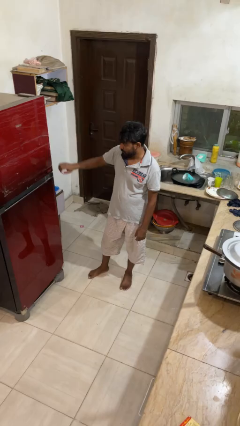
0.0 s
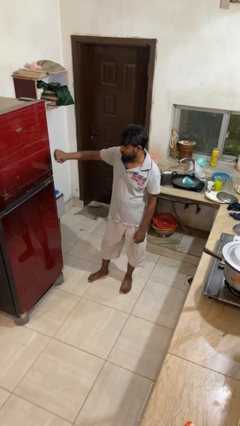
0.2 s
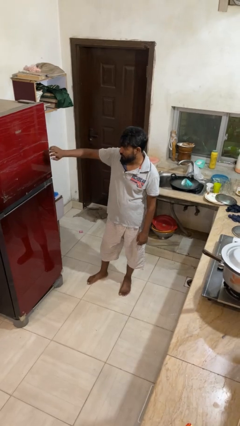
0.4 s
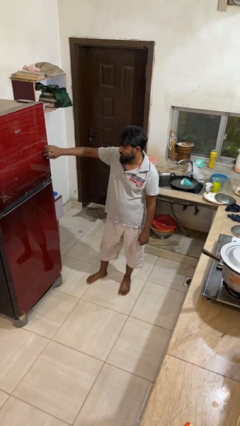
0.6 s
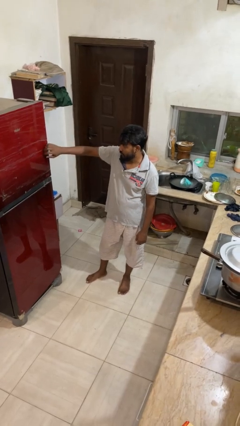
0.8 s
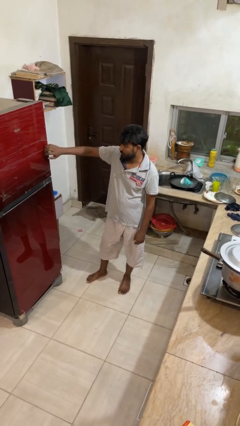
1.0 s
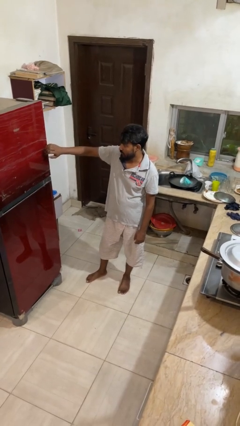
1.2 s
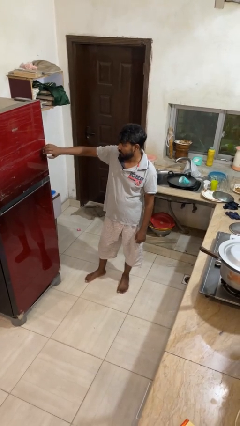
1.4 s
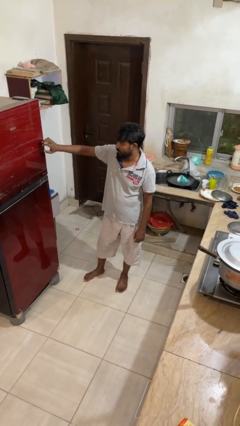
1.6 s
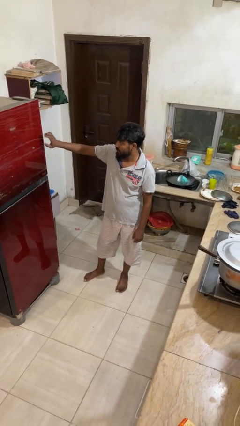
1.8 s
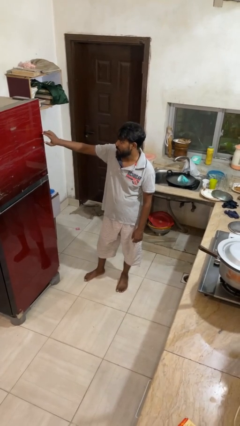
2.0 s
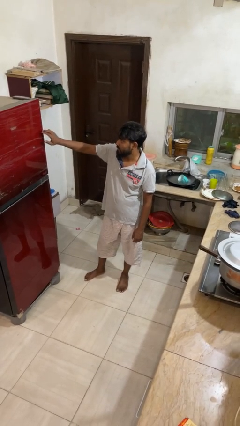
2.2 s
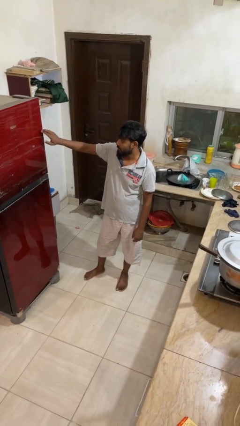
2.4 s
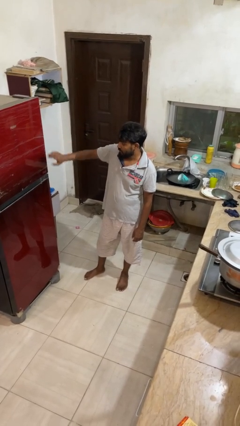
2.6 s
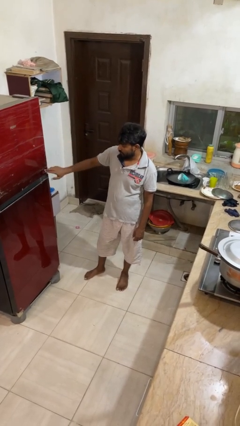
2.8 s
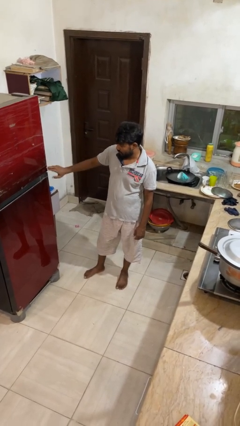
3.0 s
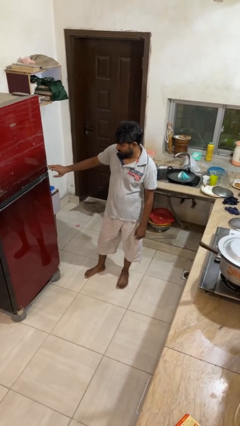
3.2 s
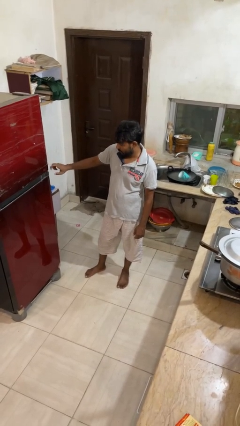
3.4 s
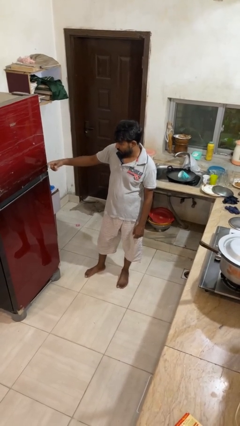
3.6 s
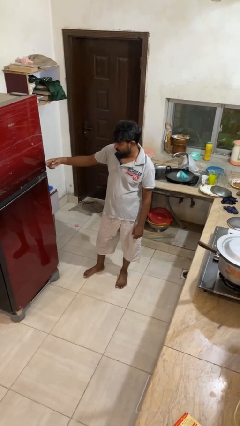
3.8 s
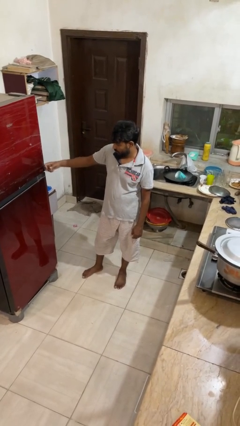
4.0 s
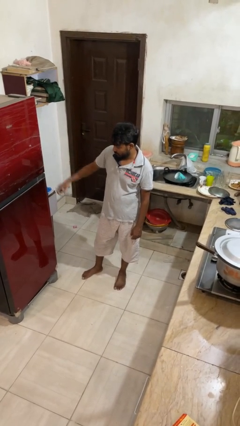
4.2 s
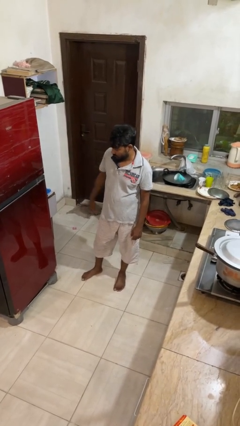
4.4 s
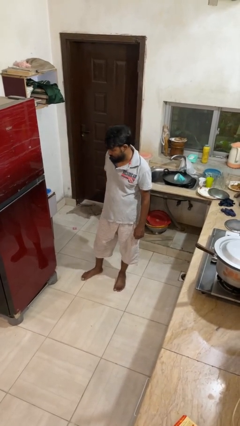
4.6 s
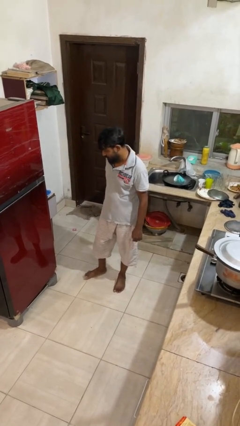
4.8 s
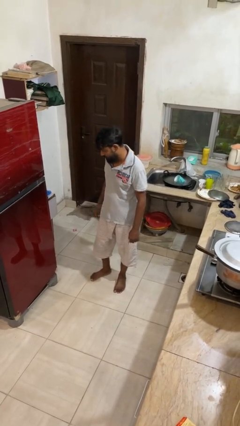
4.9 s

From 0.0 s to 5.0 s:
person taps object with finger

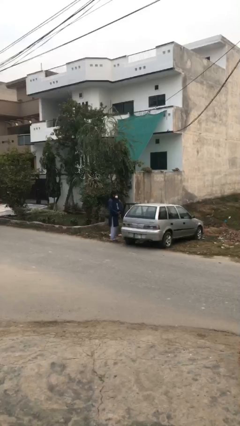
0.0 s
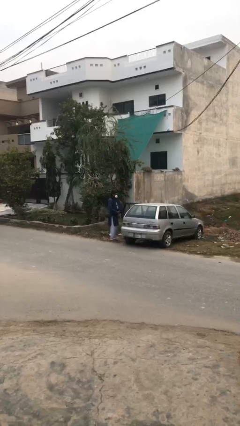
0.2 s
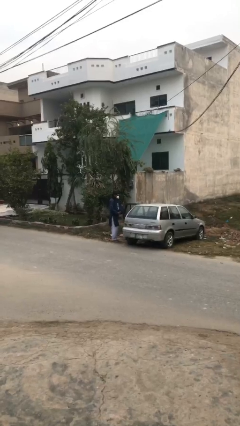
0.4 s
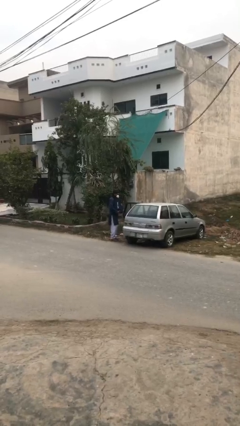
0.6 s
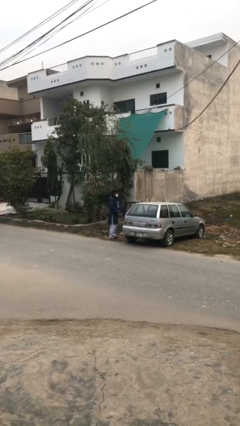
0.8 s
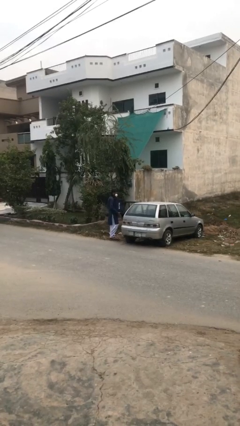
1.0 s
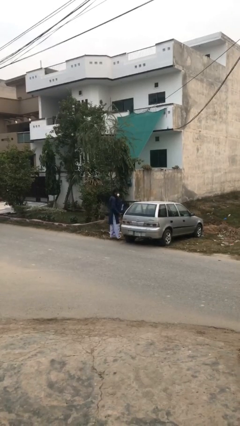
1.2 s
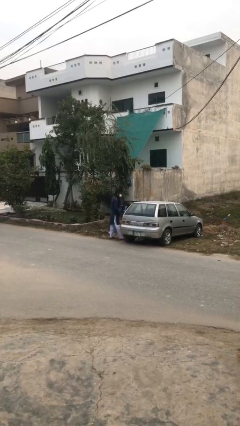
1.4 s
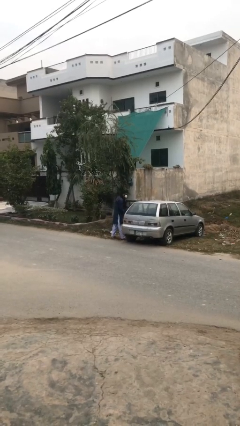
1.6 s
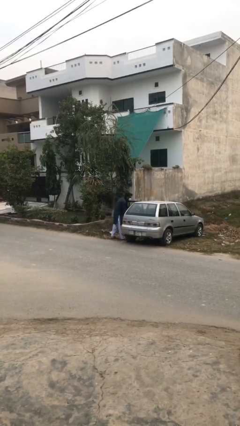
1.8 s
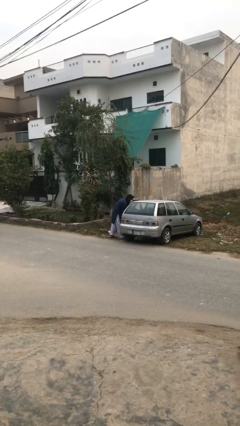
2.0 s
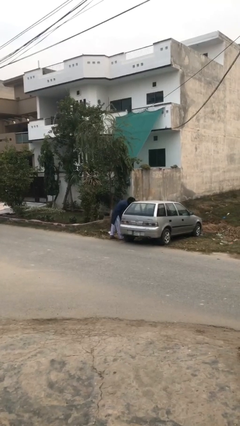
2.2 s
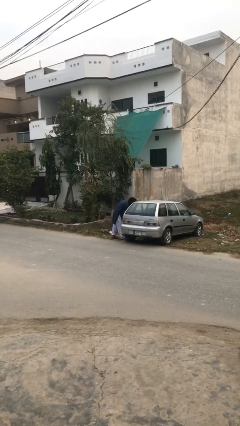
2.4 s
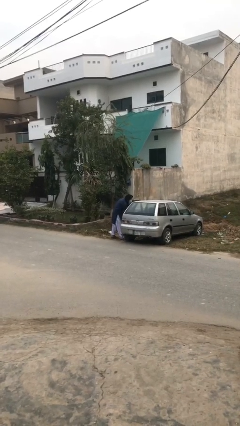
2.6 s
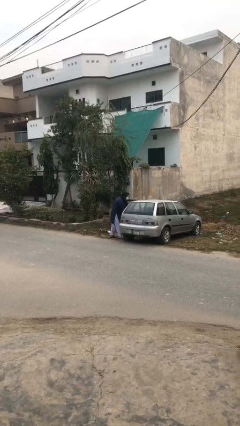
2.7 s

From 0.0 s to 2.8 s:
person loads car

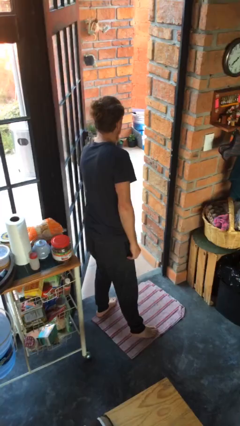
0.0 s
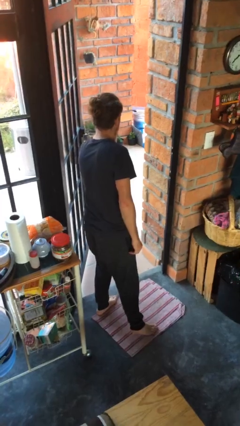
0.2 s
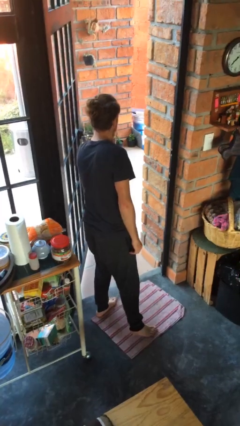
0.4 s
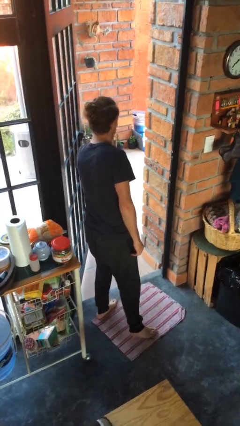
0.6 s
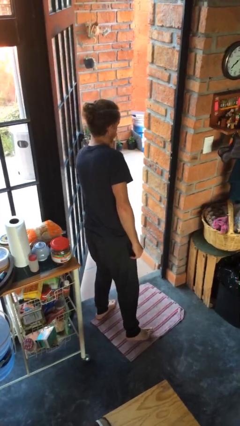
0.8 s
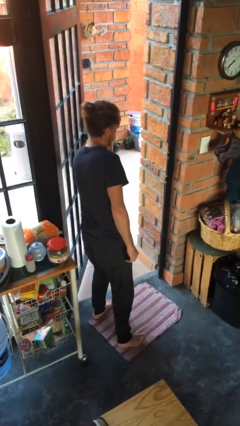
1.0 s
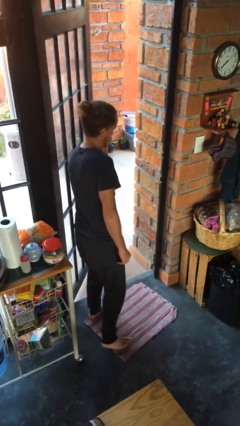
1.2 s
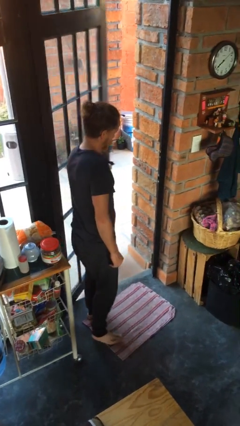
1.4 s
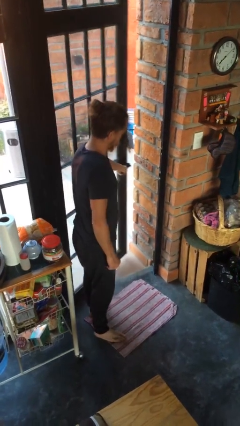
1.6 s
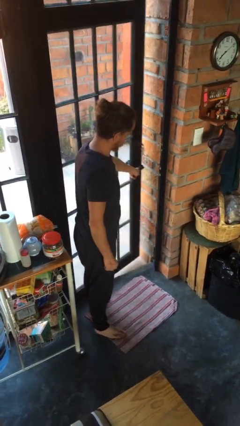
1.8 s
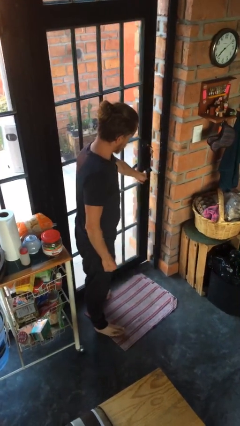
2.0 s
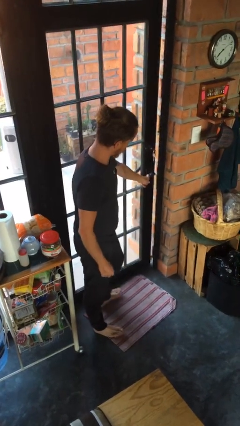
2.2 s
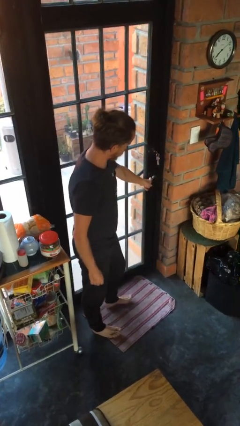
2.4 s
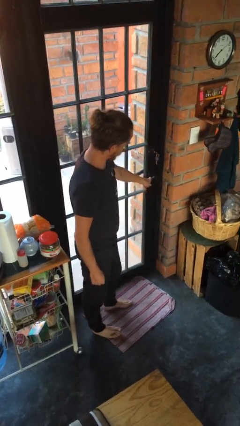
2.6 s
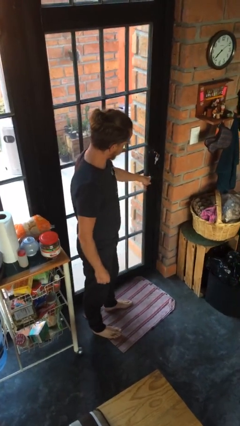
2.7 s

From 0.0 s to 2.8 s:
person closes facility door

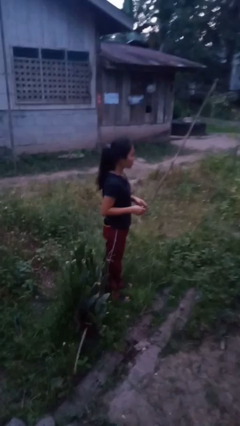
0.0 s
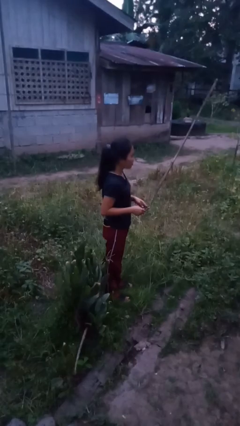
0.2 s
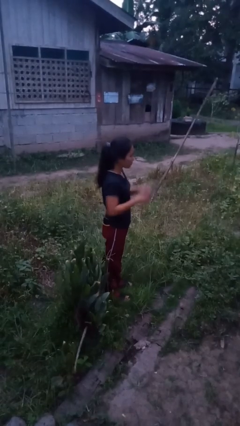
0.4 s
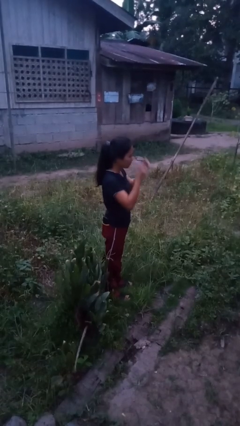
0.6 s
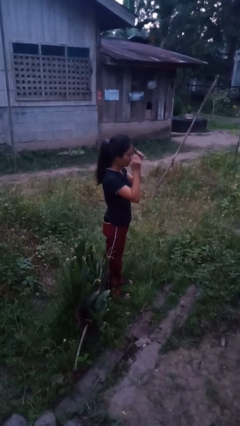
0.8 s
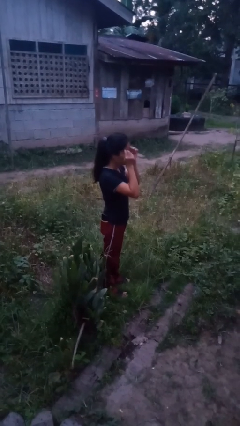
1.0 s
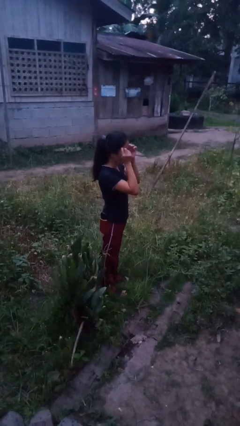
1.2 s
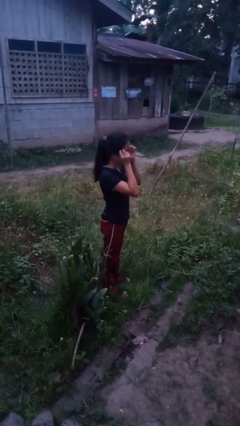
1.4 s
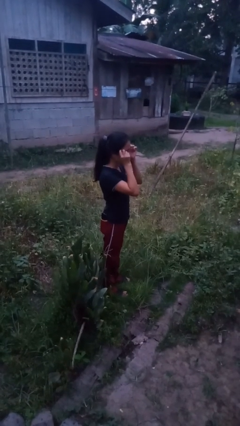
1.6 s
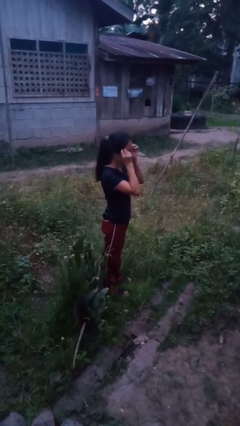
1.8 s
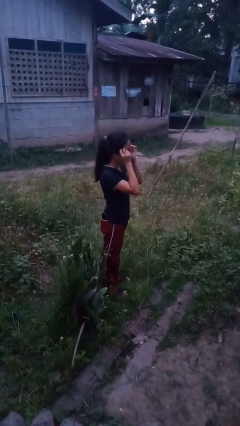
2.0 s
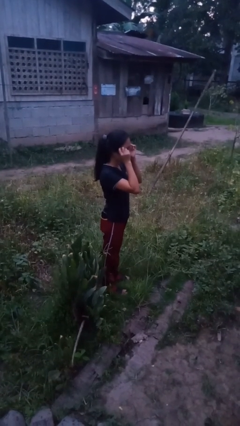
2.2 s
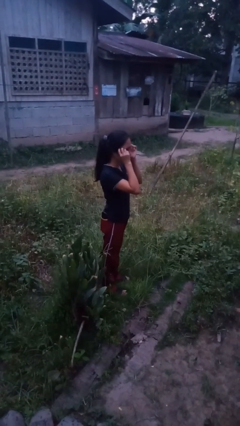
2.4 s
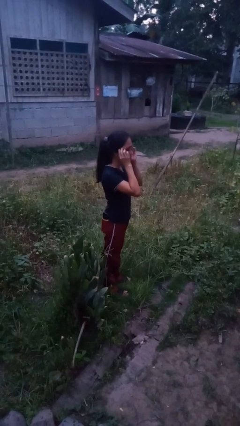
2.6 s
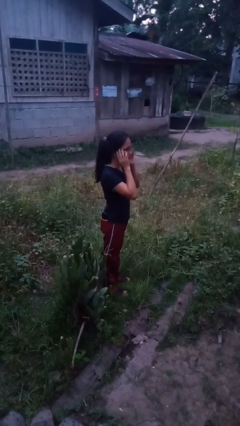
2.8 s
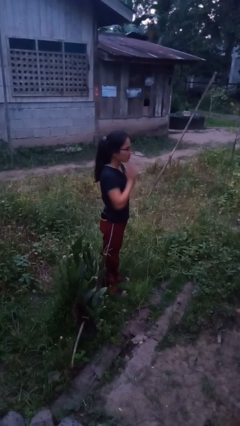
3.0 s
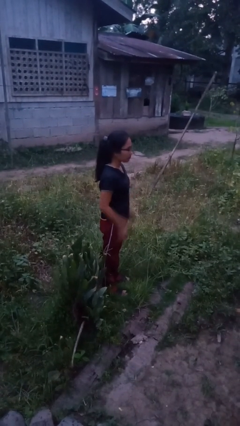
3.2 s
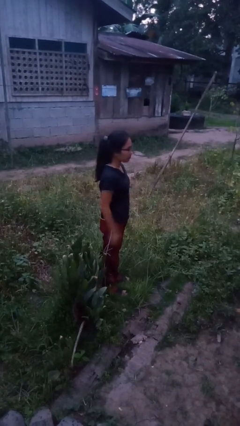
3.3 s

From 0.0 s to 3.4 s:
person puts on glasses

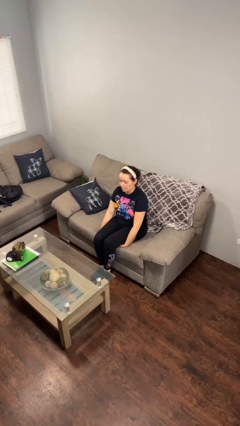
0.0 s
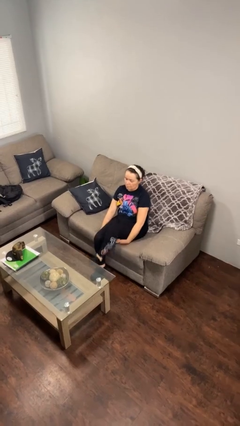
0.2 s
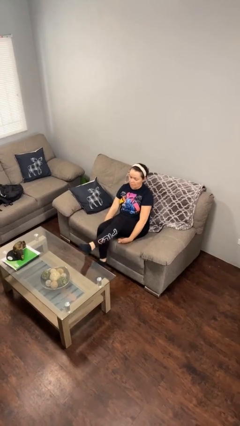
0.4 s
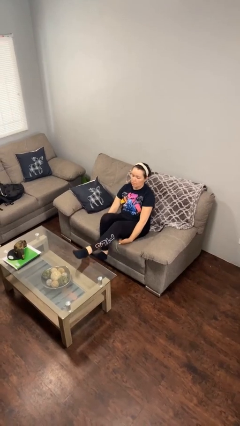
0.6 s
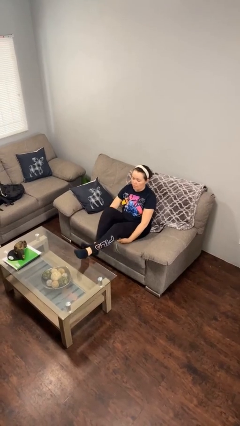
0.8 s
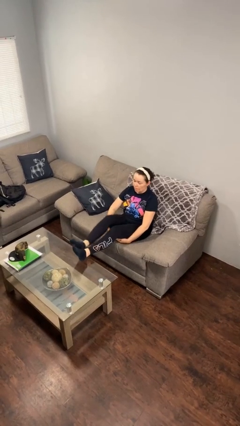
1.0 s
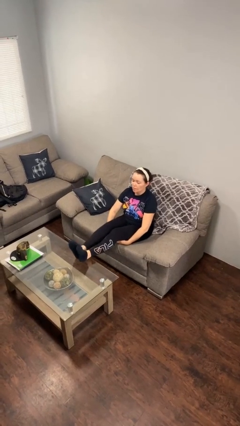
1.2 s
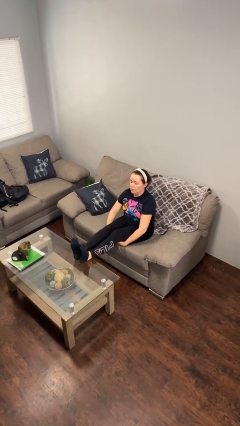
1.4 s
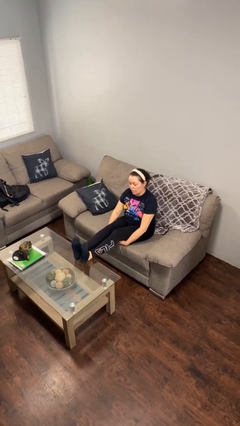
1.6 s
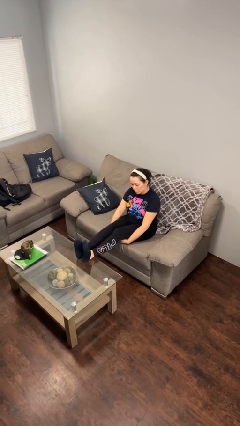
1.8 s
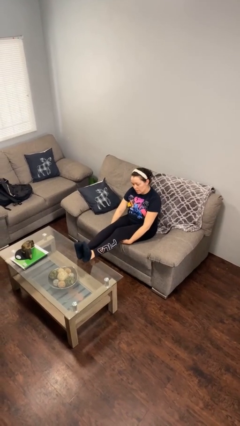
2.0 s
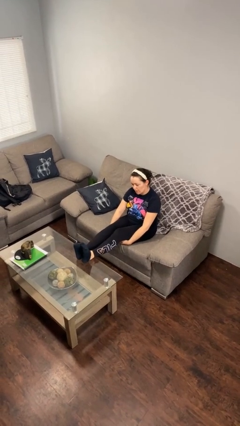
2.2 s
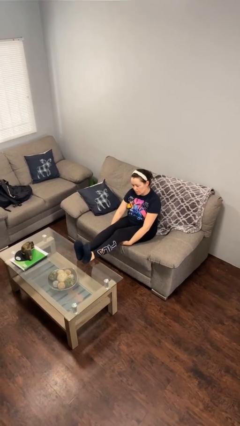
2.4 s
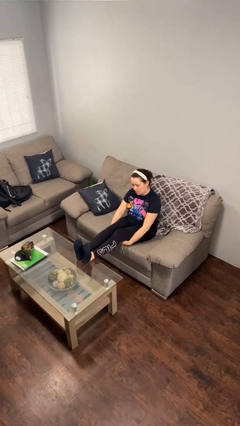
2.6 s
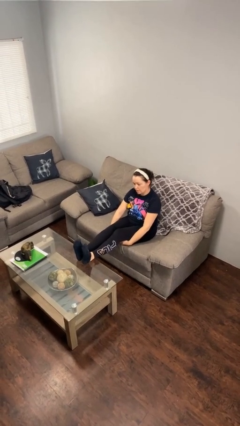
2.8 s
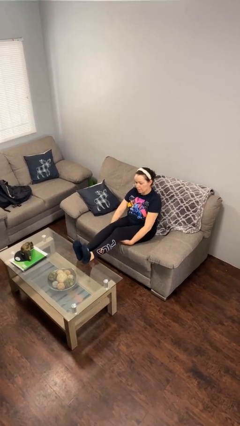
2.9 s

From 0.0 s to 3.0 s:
person puts feet up

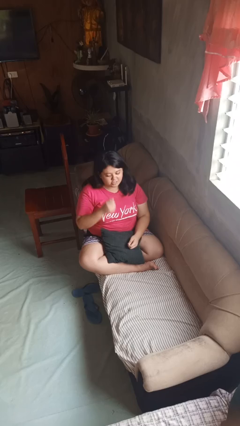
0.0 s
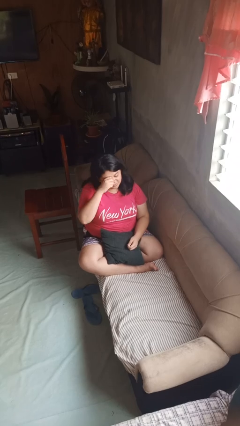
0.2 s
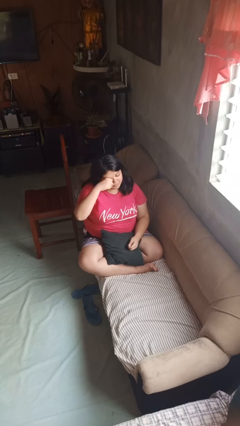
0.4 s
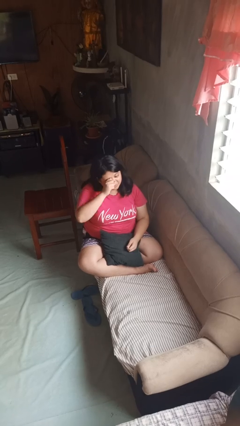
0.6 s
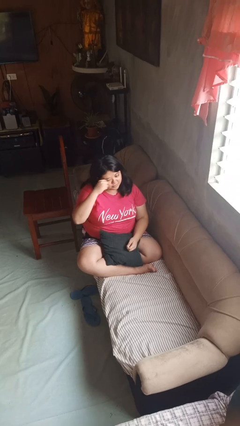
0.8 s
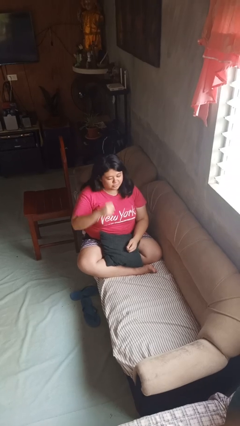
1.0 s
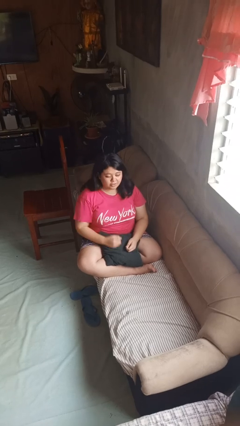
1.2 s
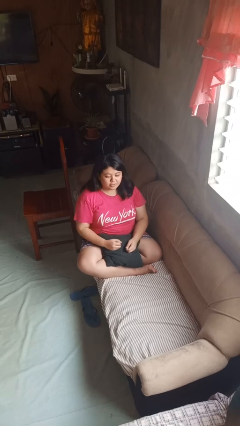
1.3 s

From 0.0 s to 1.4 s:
person rubs eyes
